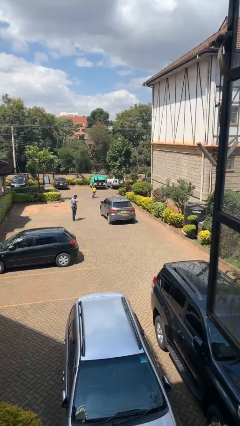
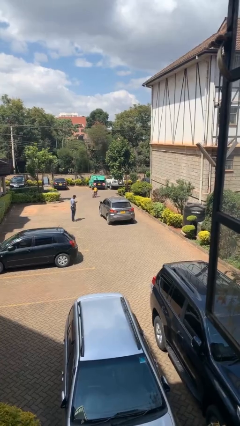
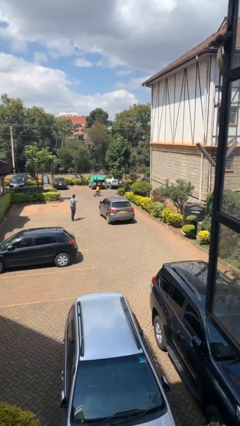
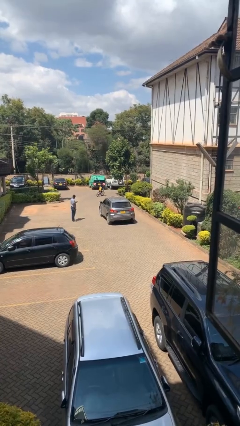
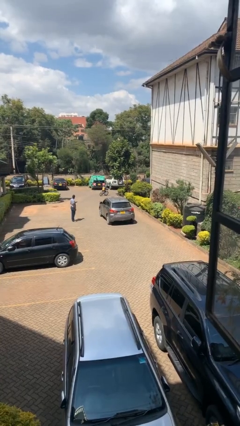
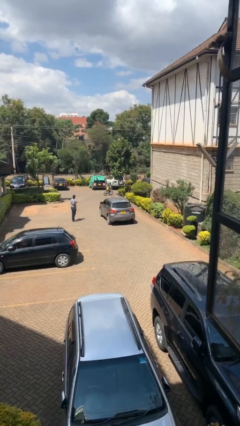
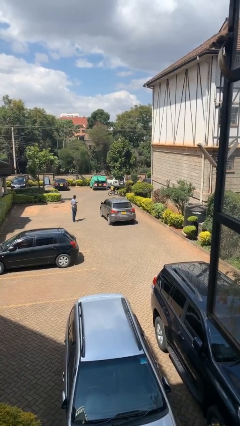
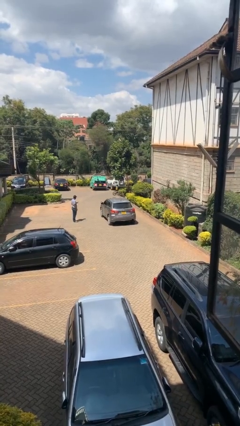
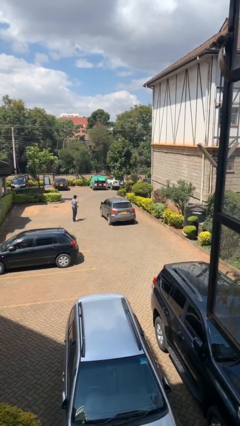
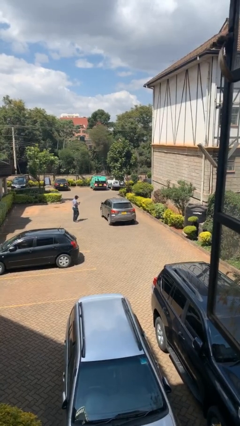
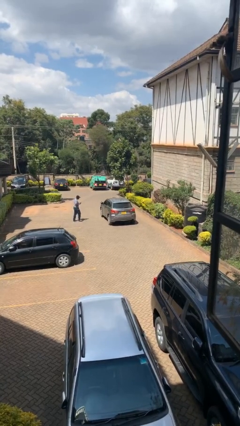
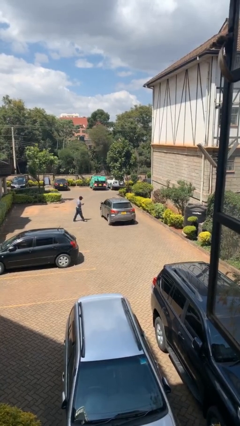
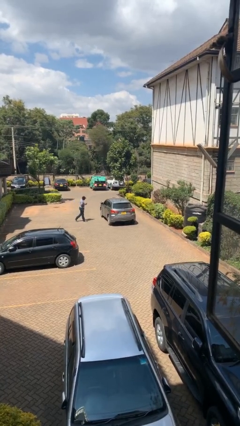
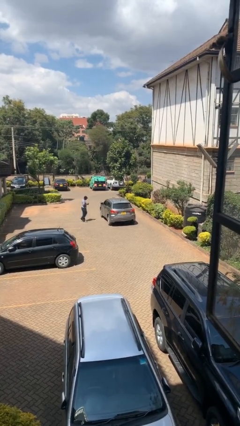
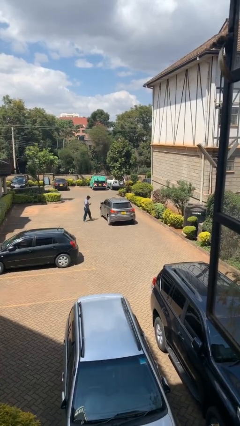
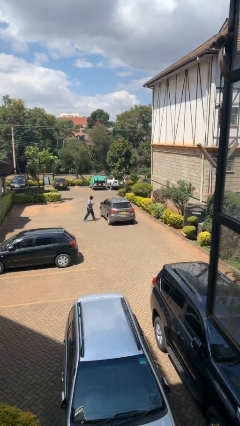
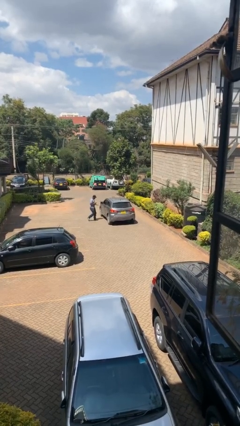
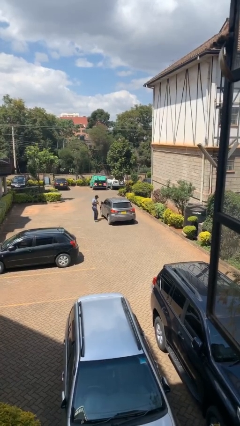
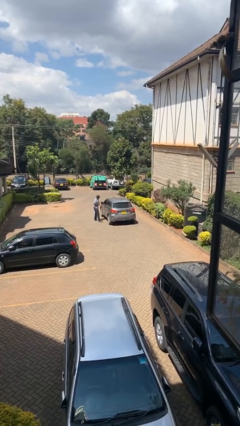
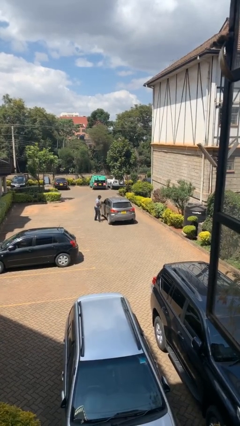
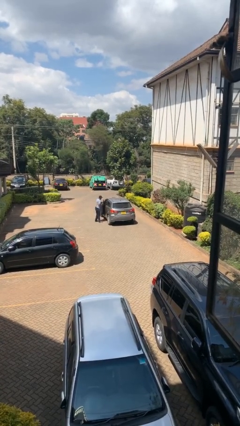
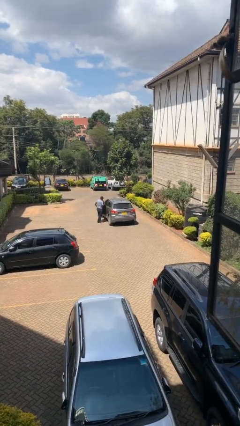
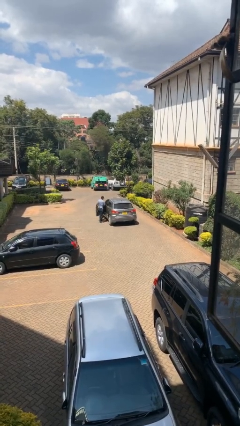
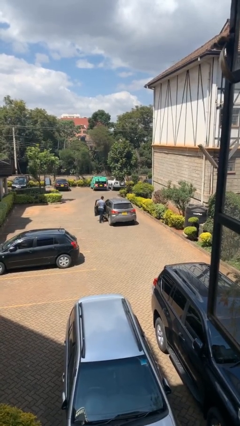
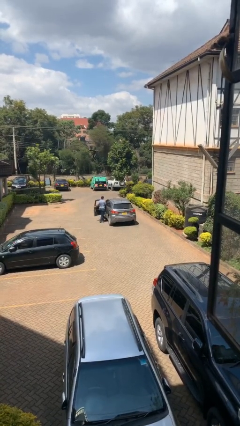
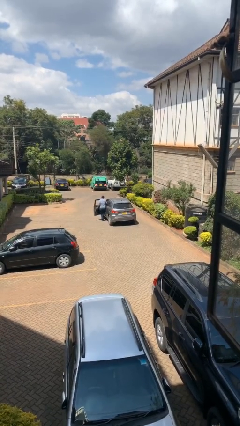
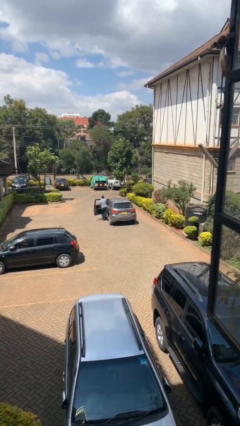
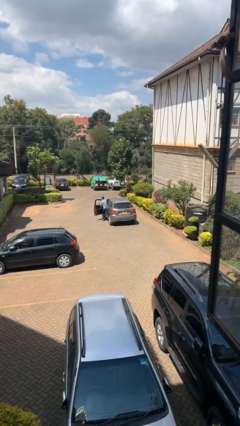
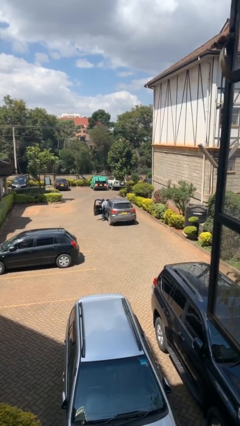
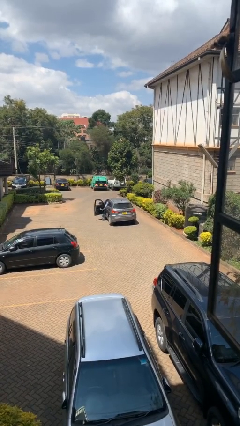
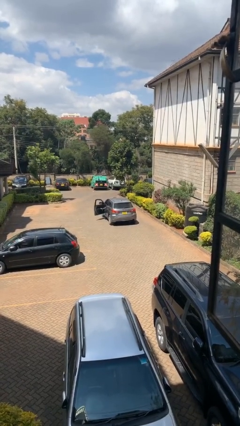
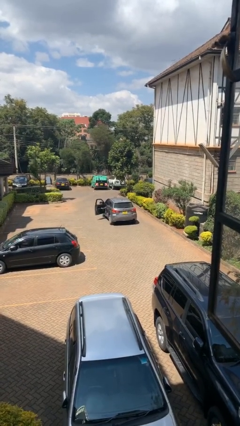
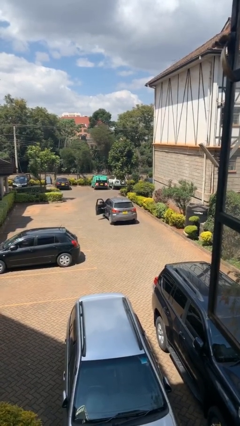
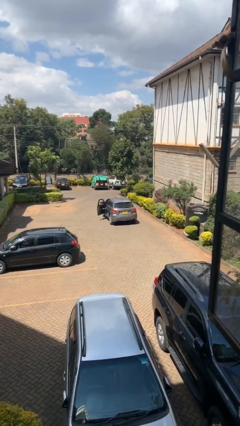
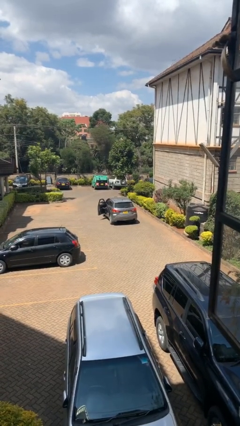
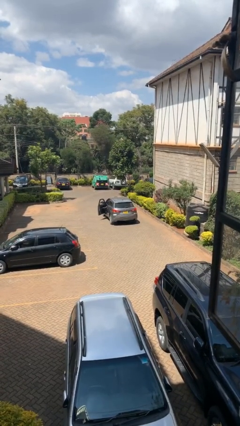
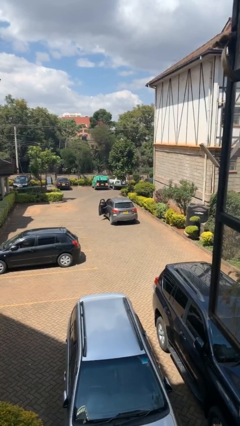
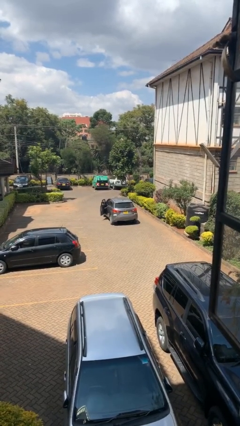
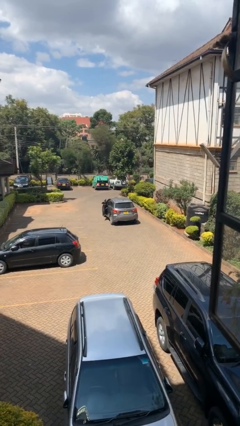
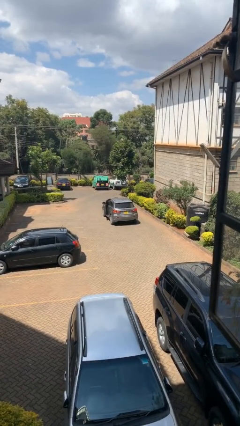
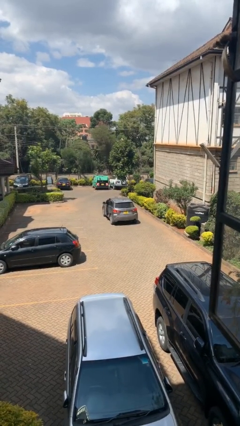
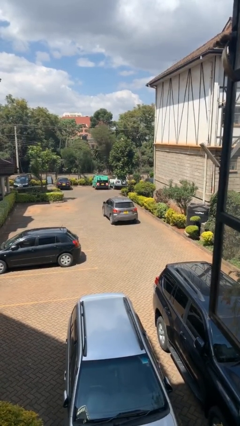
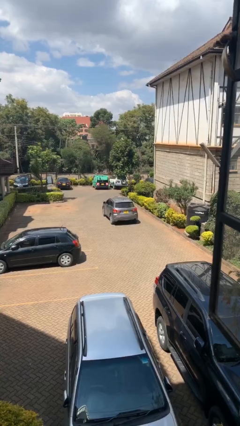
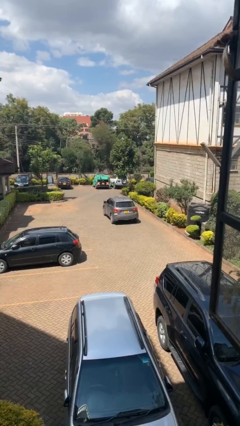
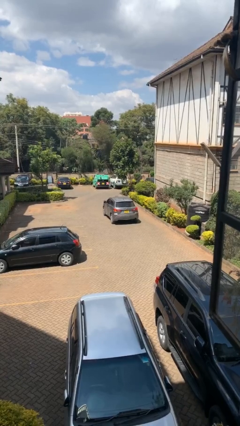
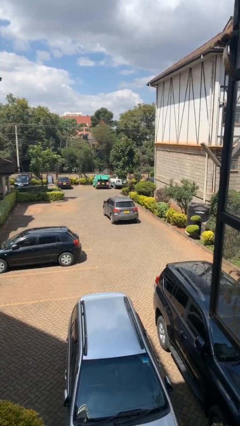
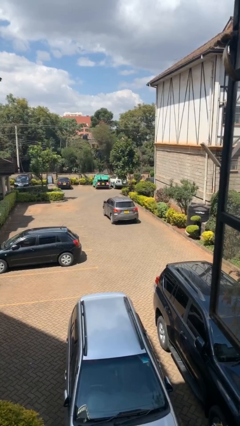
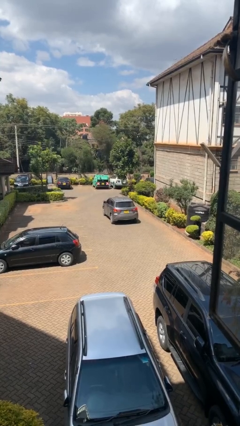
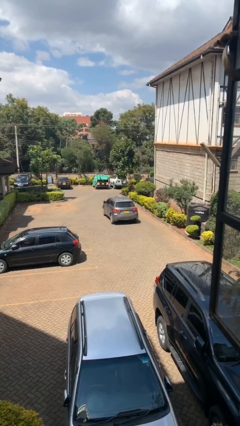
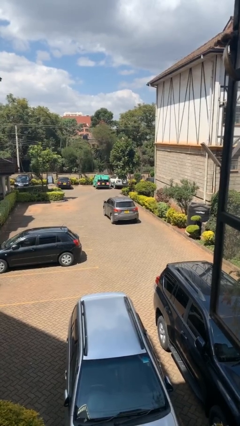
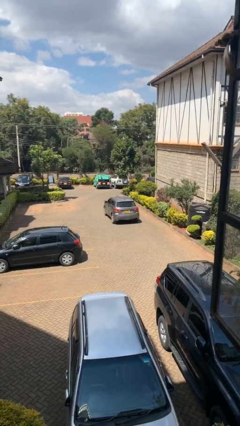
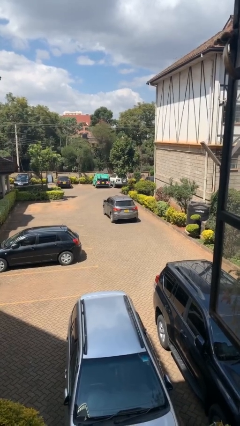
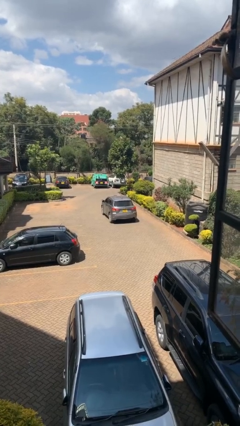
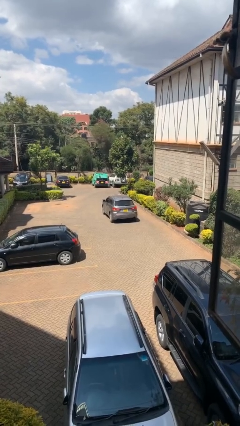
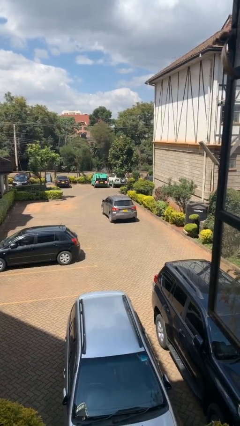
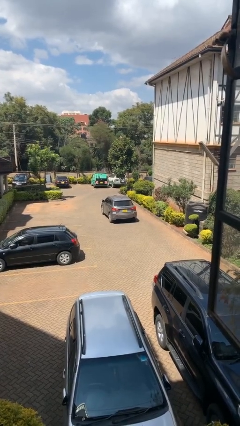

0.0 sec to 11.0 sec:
car picks up person

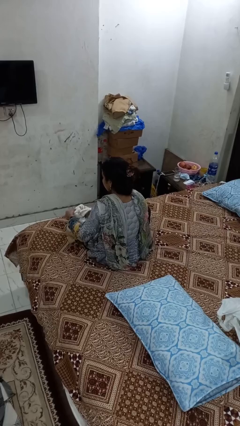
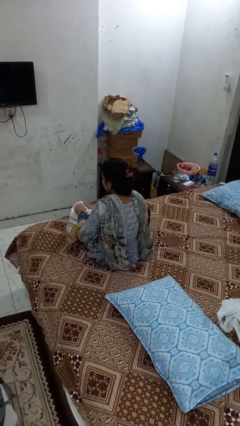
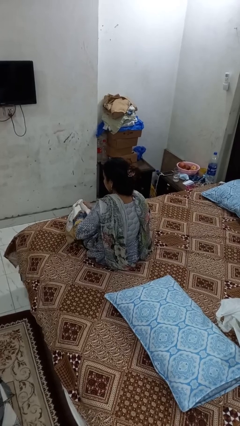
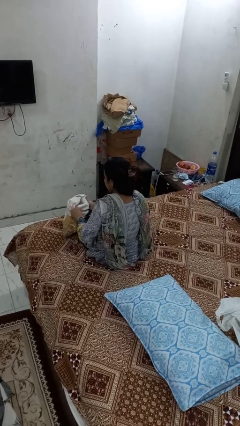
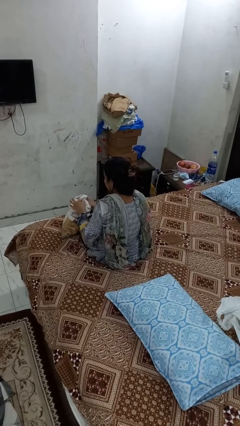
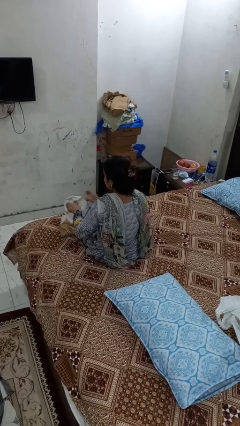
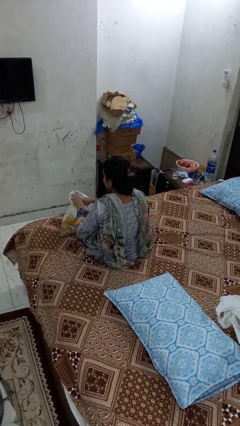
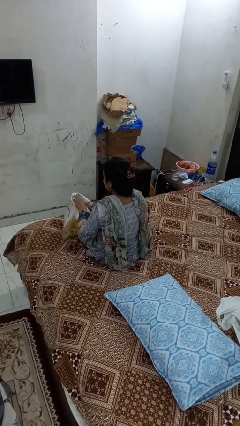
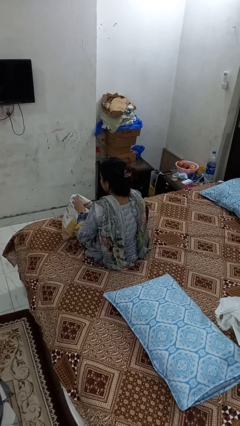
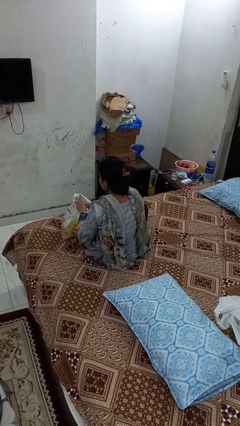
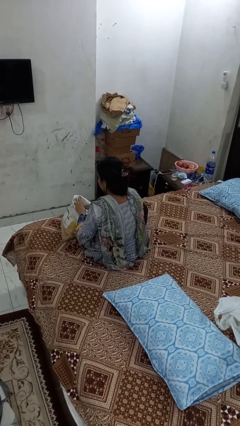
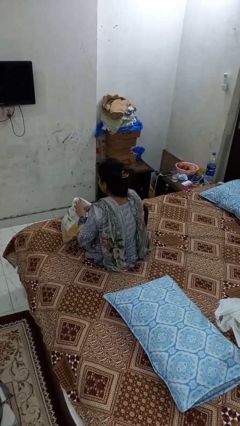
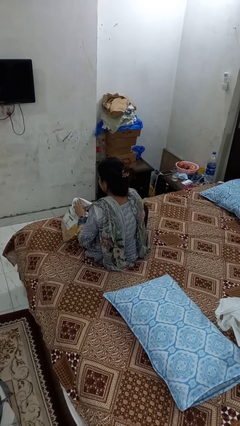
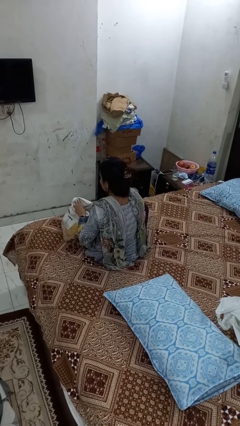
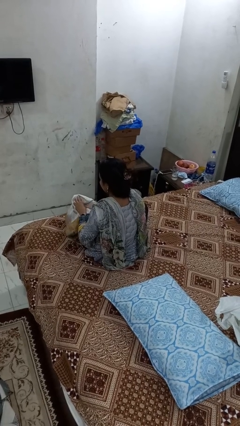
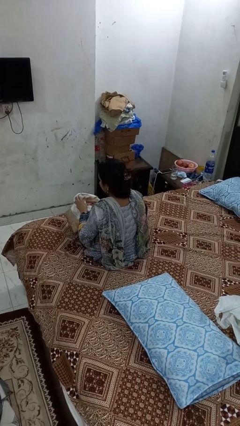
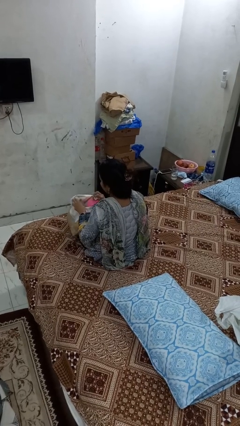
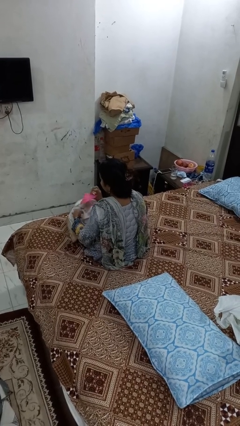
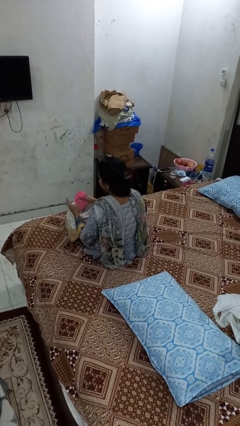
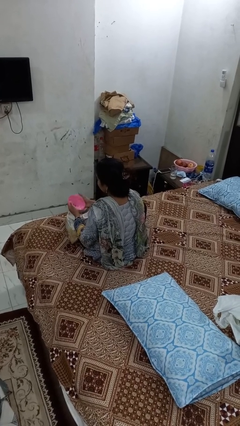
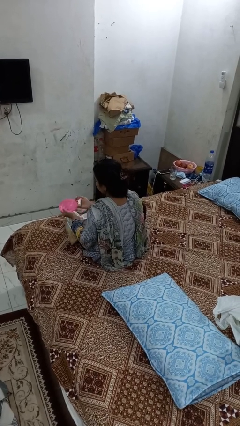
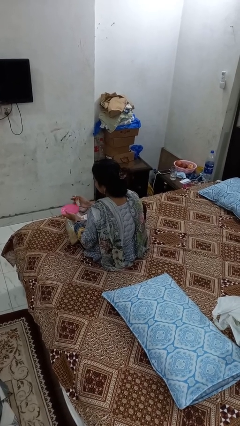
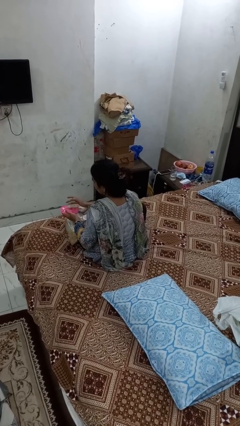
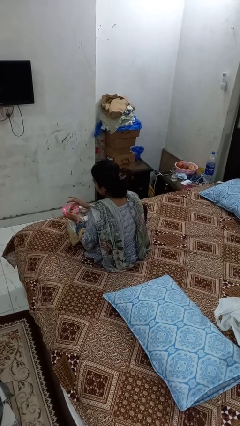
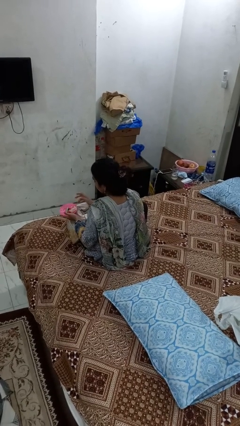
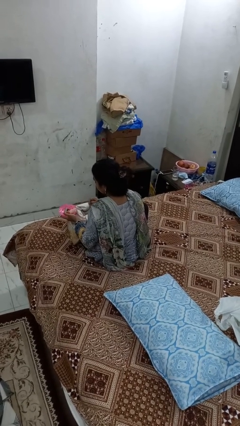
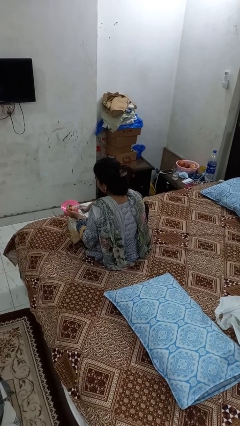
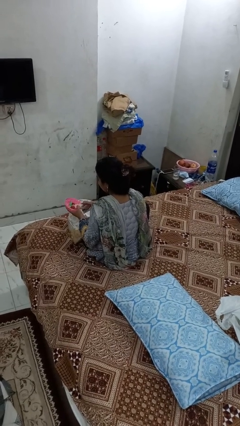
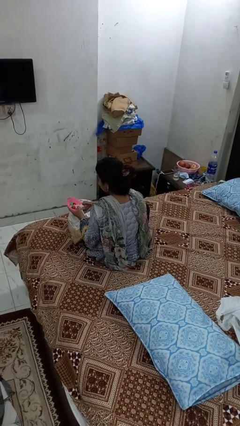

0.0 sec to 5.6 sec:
person takes object from bag

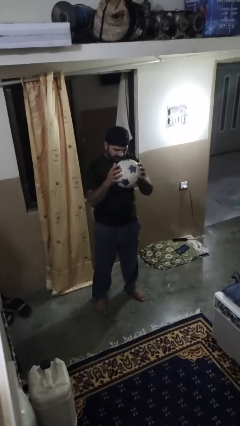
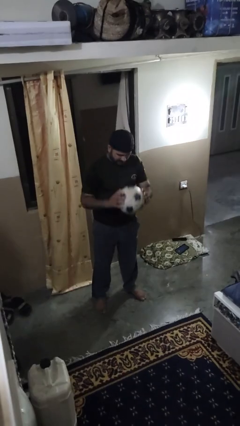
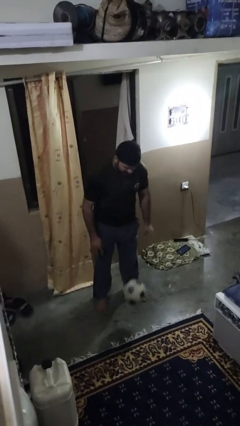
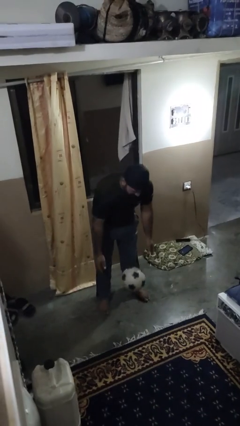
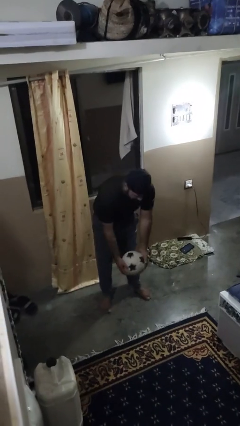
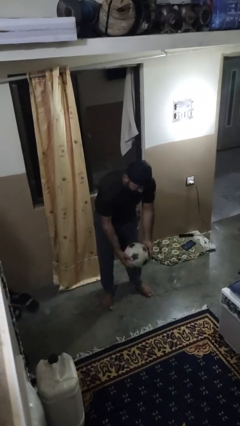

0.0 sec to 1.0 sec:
person bounces ball on floor
